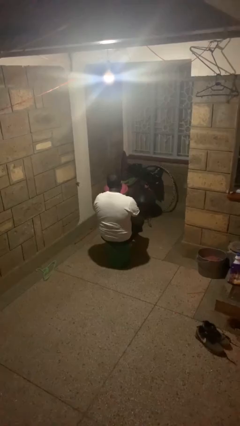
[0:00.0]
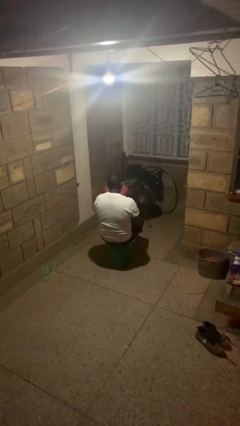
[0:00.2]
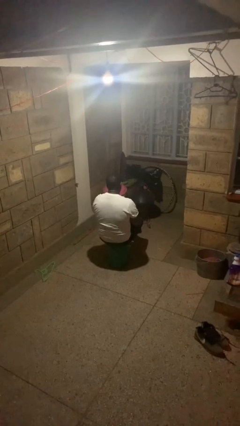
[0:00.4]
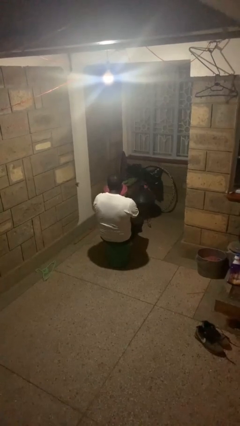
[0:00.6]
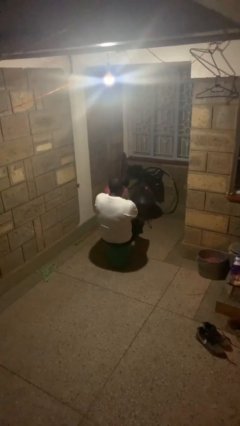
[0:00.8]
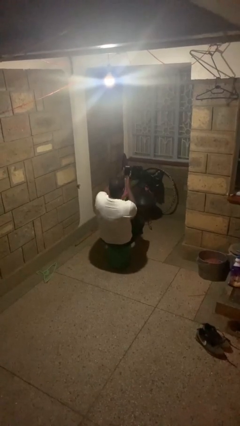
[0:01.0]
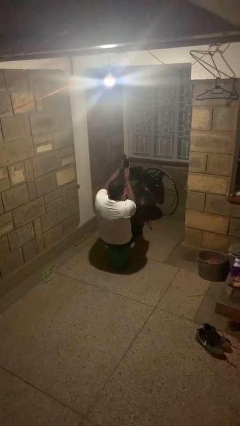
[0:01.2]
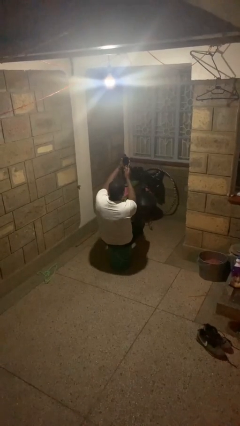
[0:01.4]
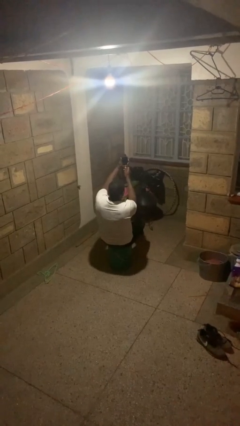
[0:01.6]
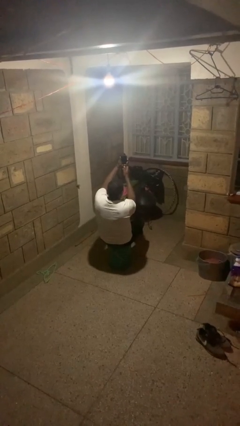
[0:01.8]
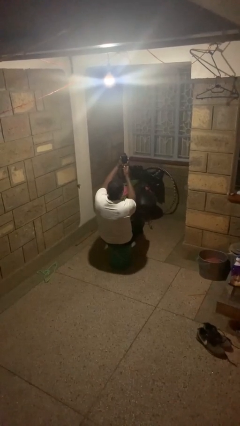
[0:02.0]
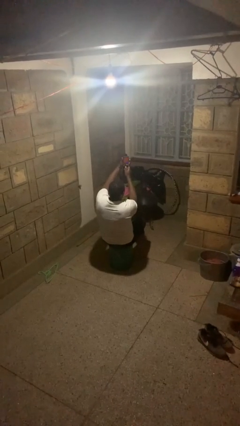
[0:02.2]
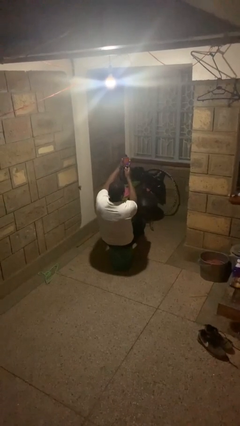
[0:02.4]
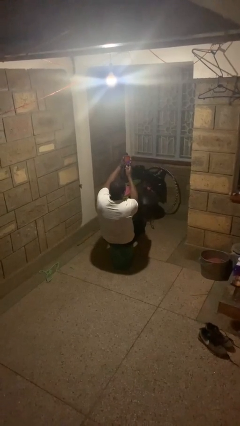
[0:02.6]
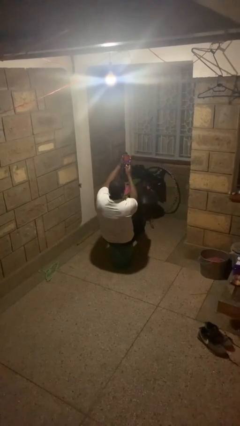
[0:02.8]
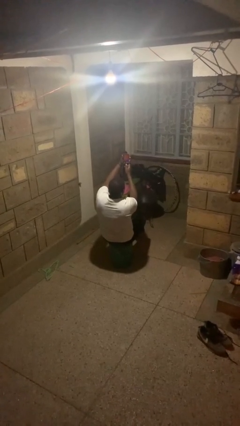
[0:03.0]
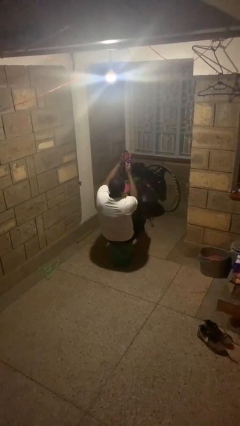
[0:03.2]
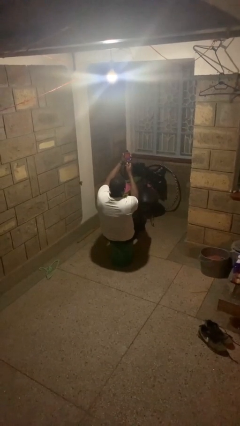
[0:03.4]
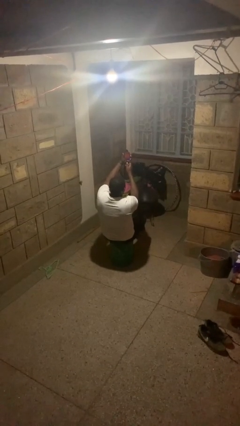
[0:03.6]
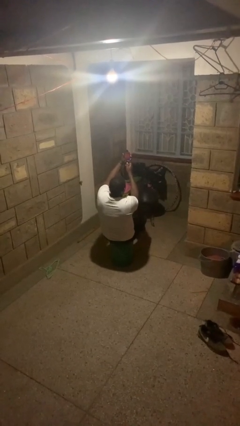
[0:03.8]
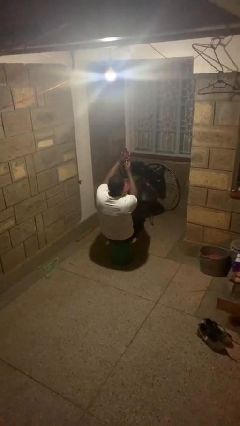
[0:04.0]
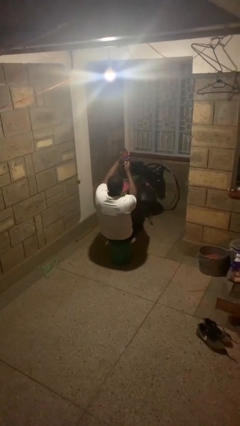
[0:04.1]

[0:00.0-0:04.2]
person takes selfie

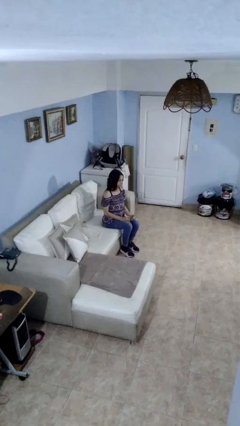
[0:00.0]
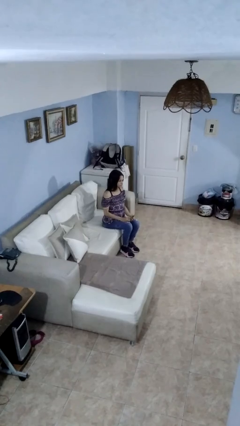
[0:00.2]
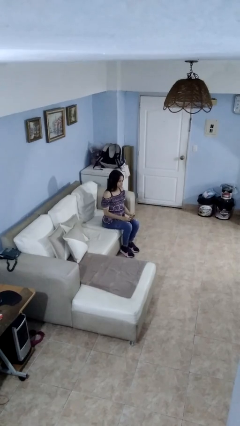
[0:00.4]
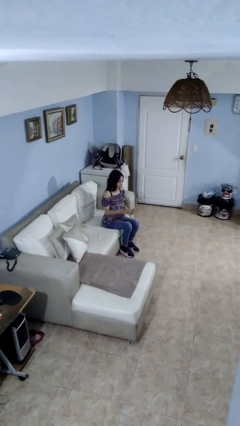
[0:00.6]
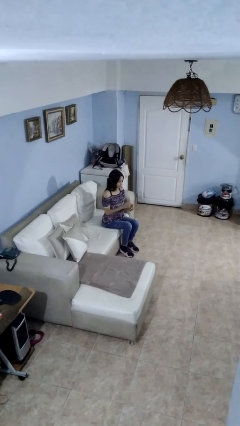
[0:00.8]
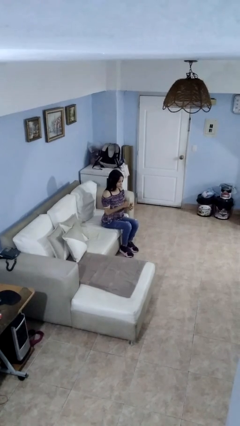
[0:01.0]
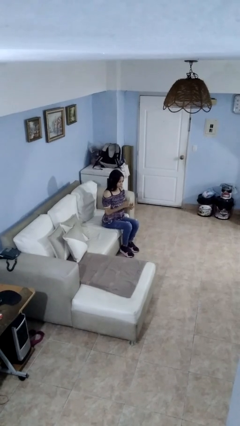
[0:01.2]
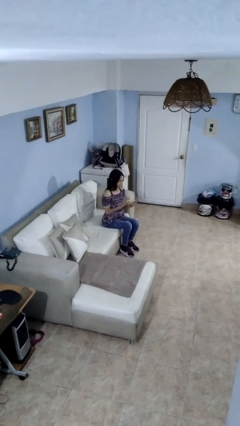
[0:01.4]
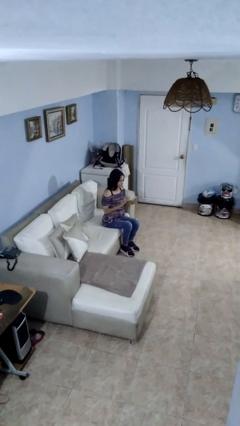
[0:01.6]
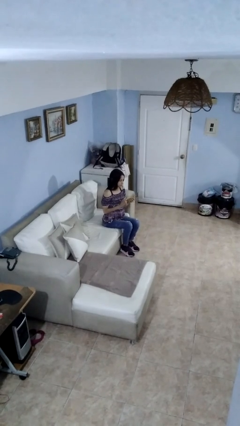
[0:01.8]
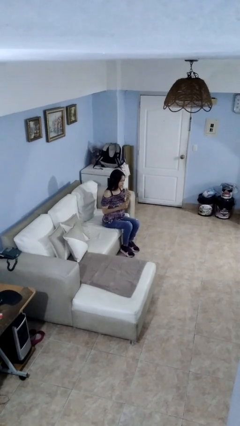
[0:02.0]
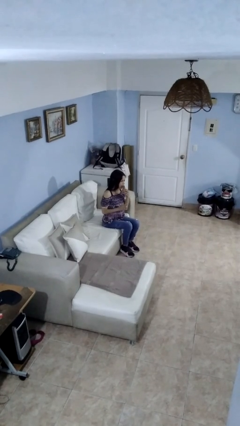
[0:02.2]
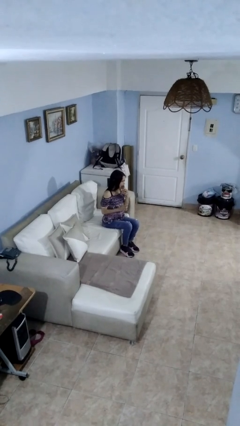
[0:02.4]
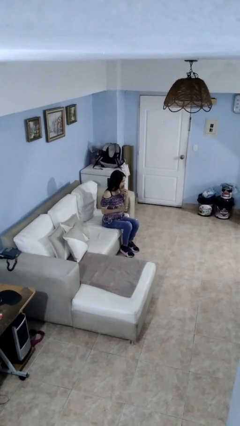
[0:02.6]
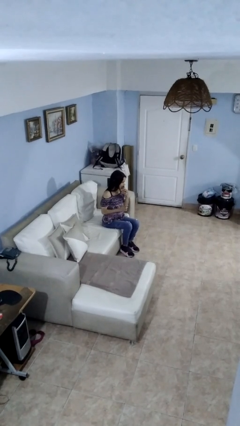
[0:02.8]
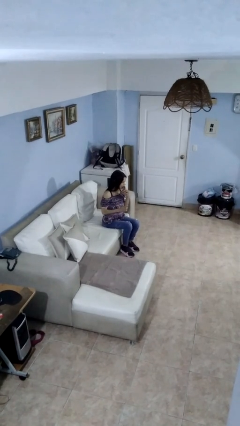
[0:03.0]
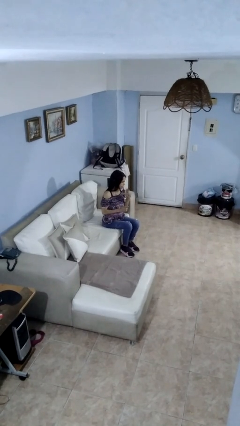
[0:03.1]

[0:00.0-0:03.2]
person eats banana

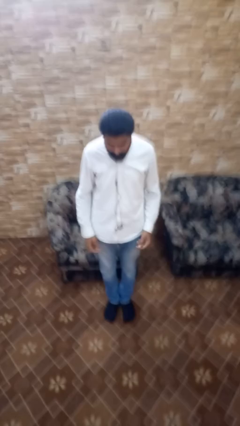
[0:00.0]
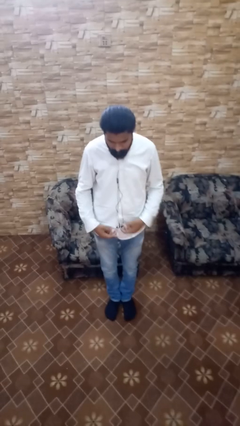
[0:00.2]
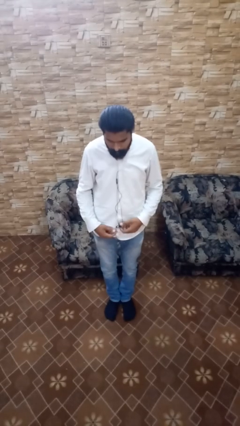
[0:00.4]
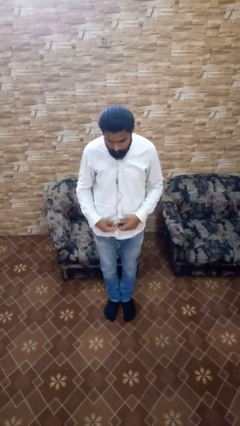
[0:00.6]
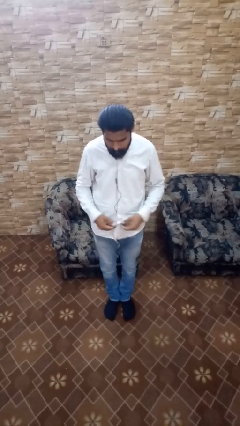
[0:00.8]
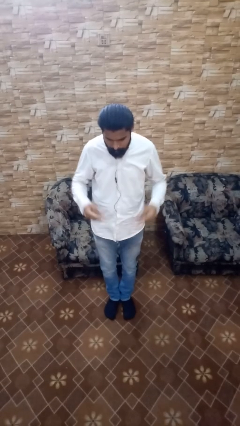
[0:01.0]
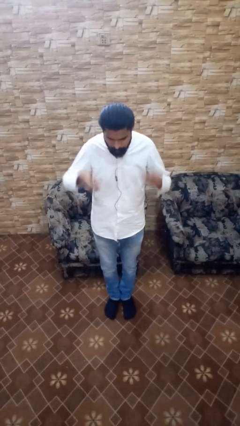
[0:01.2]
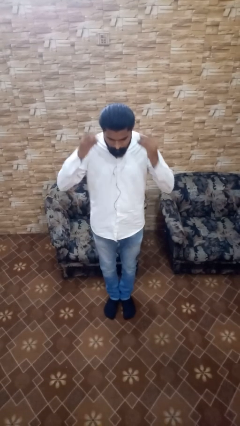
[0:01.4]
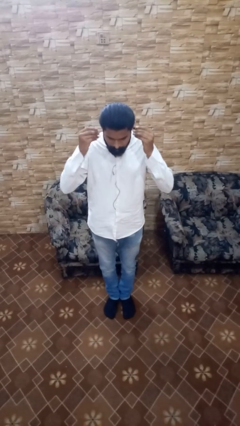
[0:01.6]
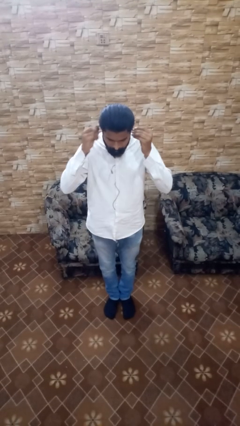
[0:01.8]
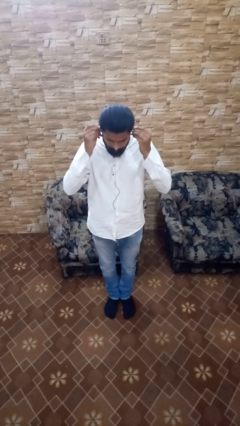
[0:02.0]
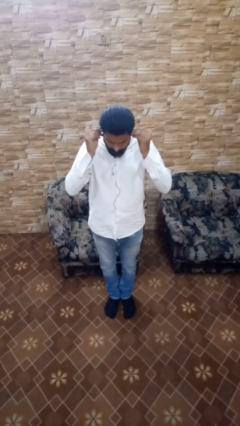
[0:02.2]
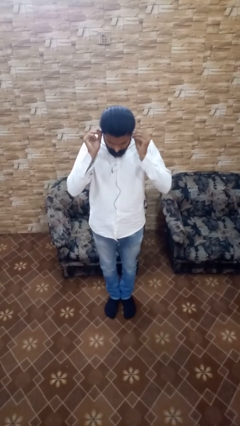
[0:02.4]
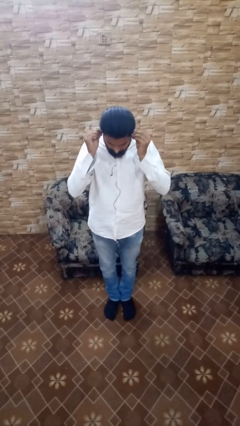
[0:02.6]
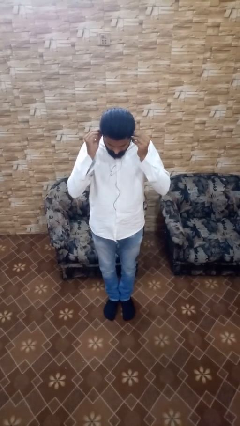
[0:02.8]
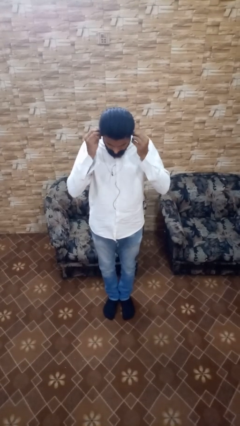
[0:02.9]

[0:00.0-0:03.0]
person puts on headphones

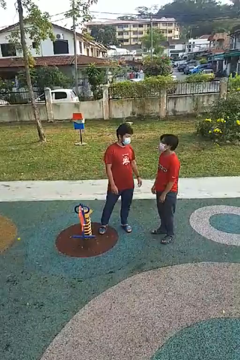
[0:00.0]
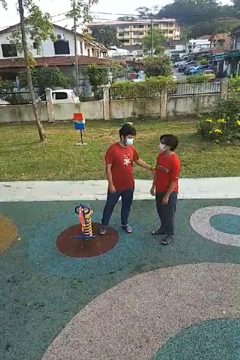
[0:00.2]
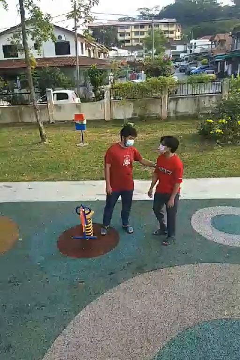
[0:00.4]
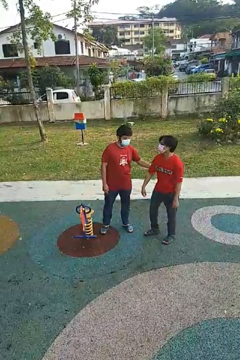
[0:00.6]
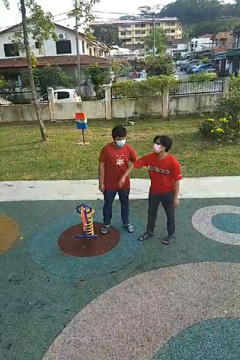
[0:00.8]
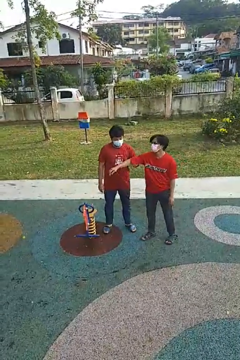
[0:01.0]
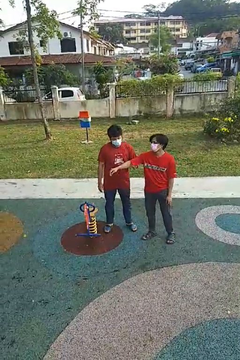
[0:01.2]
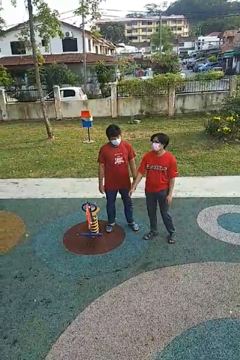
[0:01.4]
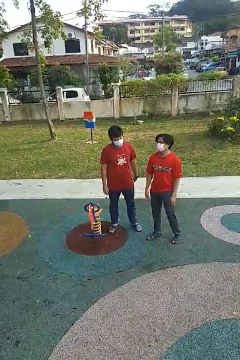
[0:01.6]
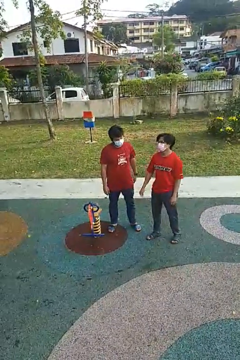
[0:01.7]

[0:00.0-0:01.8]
person grabs person by bicep

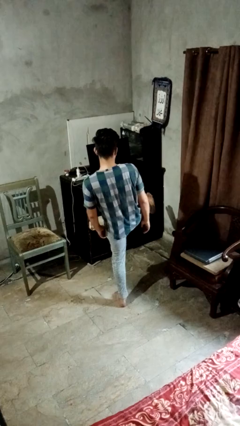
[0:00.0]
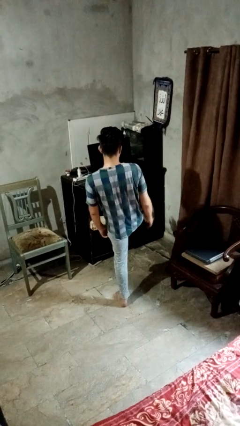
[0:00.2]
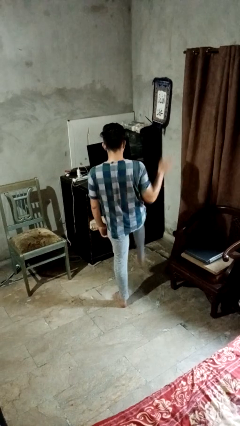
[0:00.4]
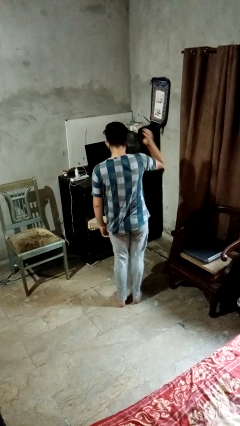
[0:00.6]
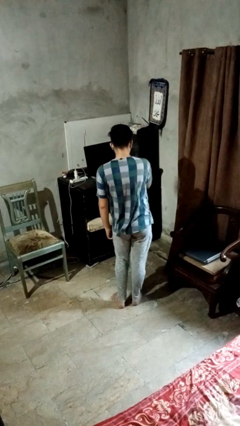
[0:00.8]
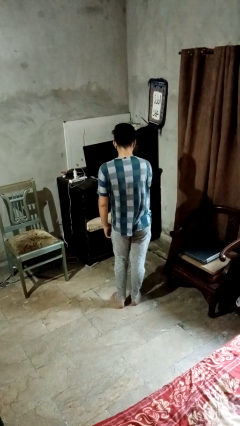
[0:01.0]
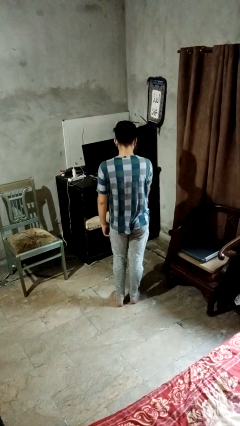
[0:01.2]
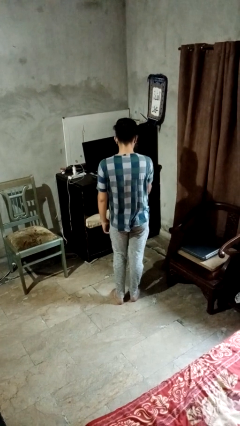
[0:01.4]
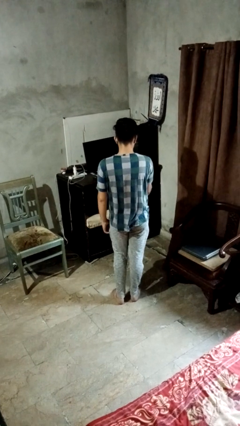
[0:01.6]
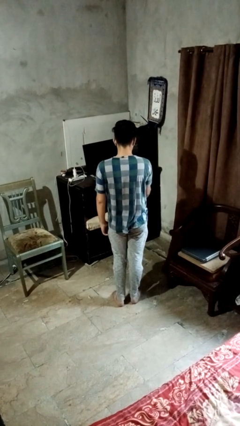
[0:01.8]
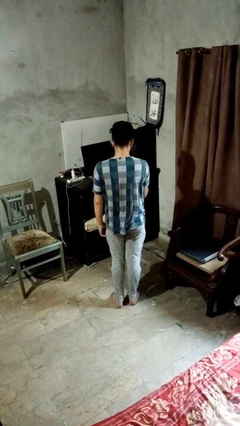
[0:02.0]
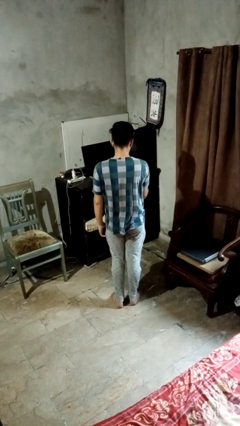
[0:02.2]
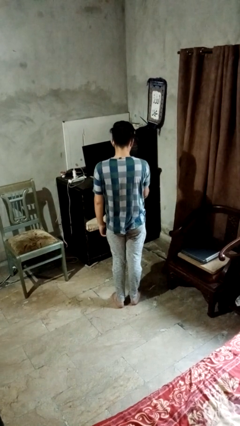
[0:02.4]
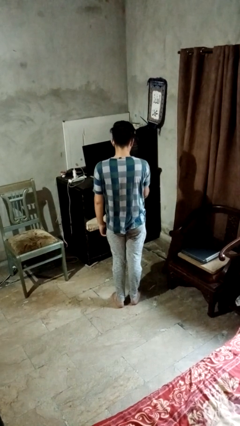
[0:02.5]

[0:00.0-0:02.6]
person karate chop

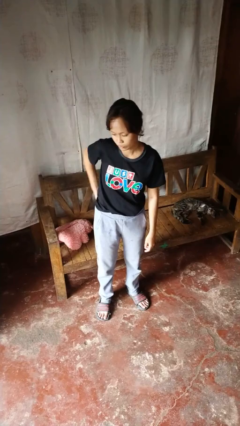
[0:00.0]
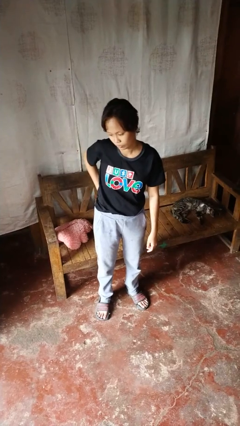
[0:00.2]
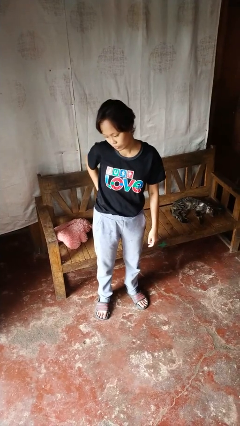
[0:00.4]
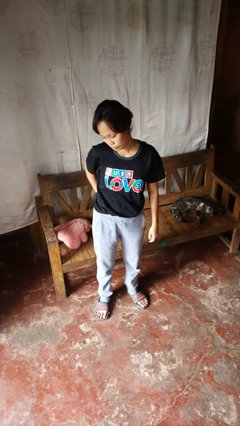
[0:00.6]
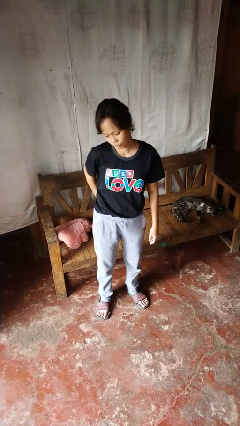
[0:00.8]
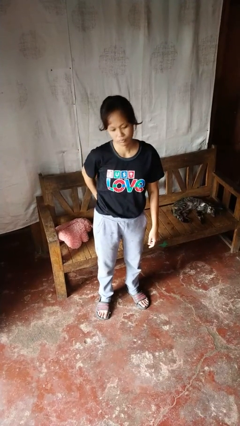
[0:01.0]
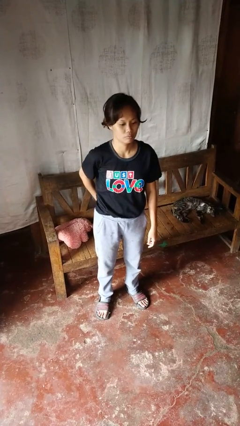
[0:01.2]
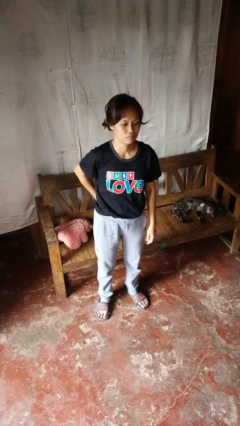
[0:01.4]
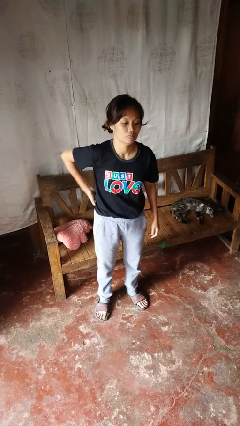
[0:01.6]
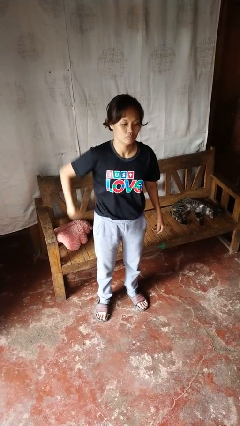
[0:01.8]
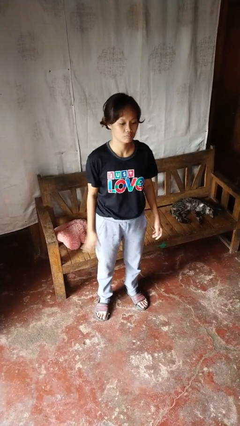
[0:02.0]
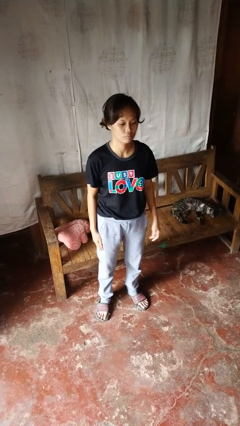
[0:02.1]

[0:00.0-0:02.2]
person puts hands in back pockets

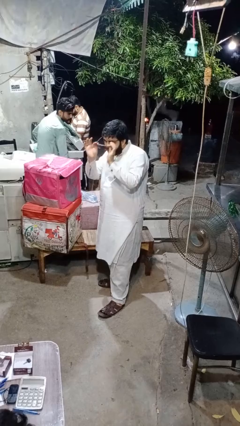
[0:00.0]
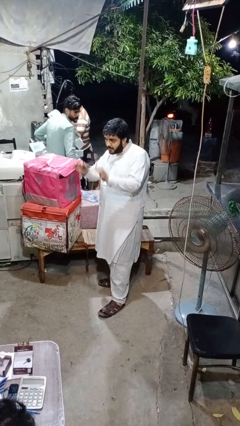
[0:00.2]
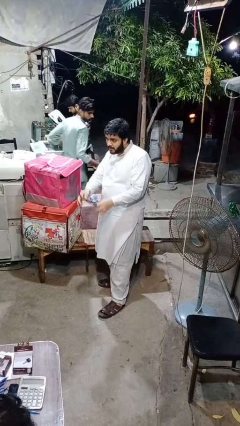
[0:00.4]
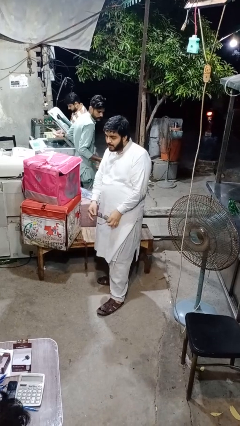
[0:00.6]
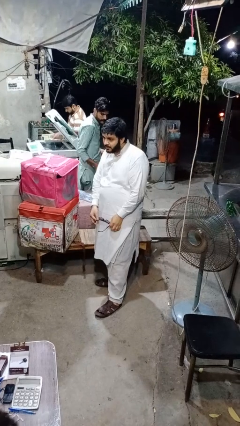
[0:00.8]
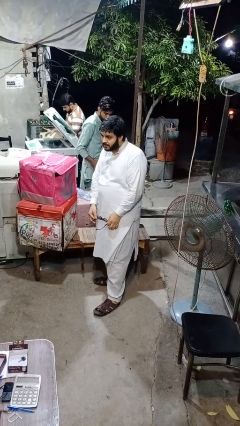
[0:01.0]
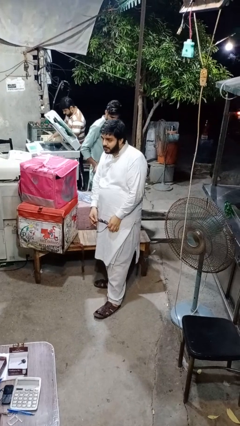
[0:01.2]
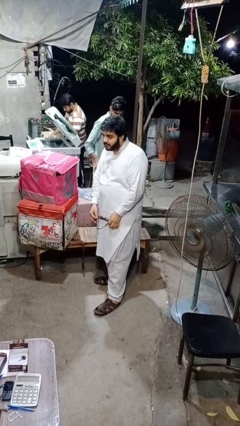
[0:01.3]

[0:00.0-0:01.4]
person takes off glasses
